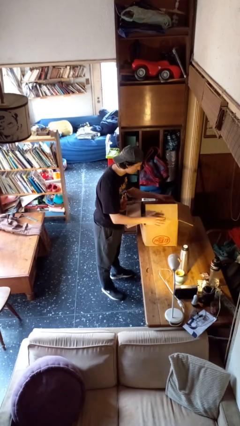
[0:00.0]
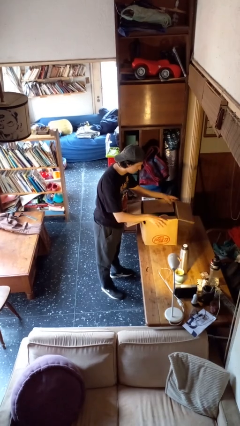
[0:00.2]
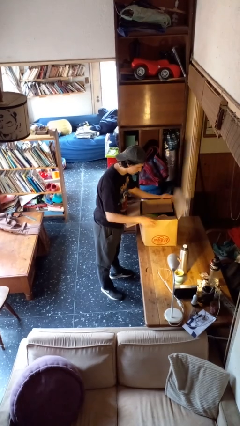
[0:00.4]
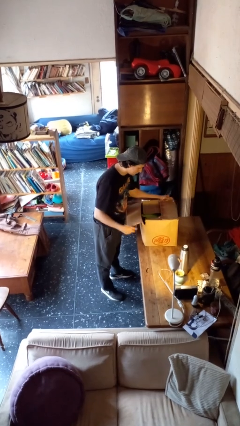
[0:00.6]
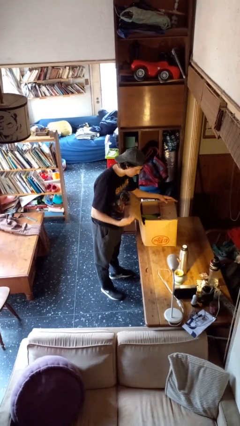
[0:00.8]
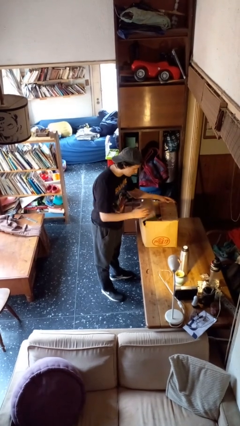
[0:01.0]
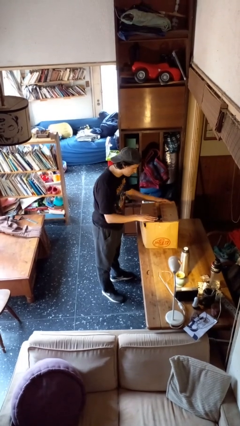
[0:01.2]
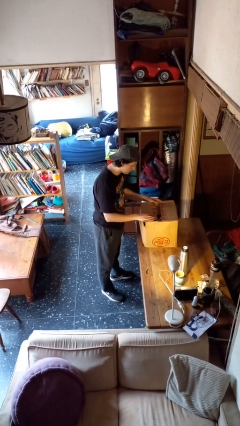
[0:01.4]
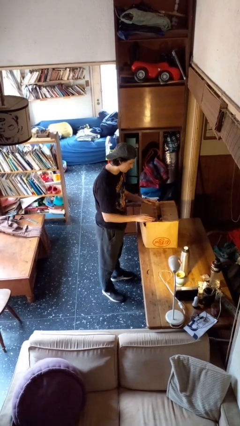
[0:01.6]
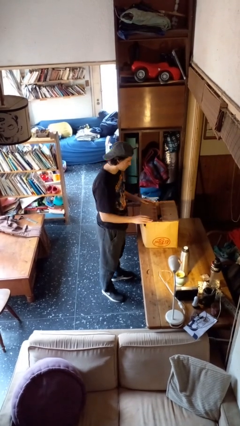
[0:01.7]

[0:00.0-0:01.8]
person closes box

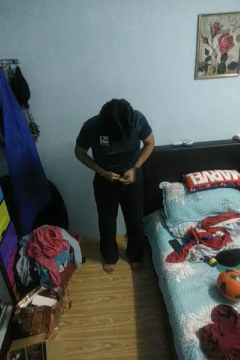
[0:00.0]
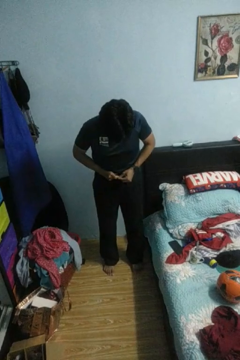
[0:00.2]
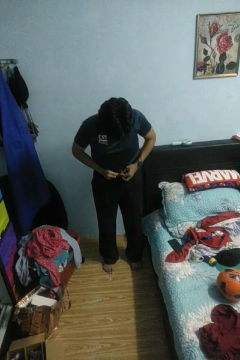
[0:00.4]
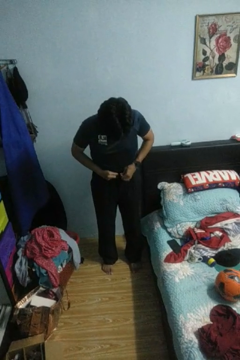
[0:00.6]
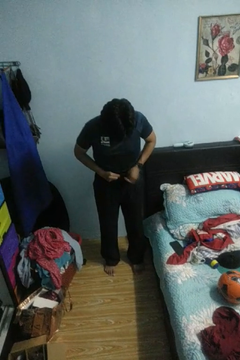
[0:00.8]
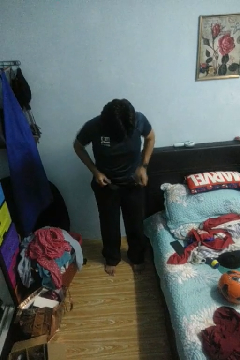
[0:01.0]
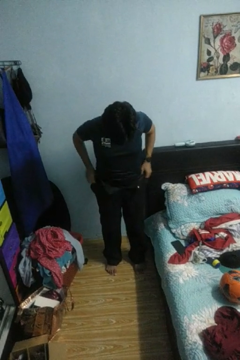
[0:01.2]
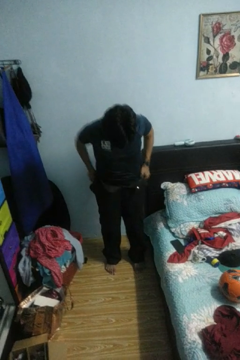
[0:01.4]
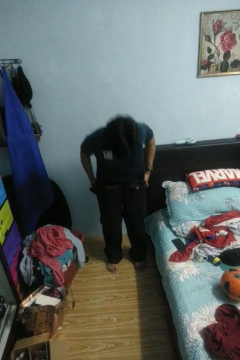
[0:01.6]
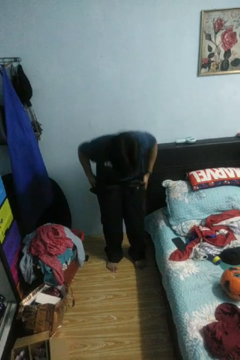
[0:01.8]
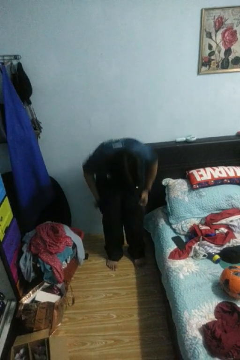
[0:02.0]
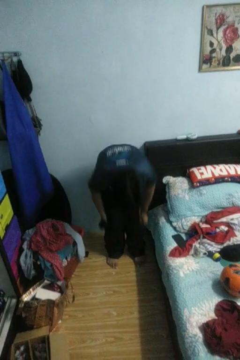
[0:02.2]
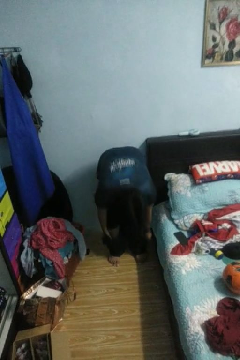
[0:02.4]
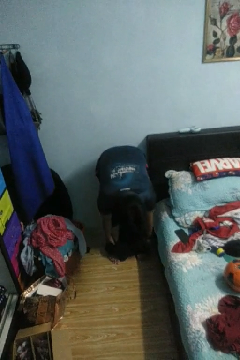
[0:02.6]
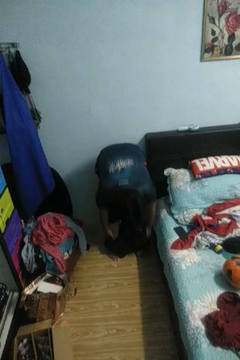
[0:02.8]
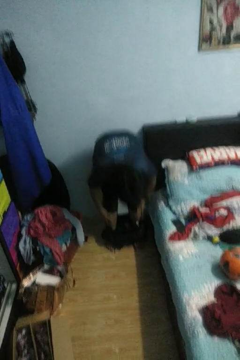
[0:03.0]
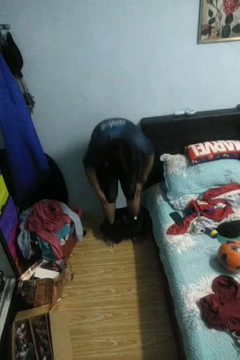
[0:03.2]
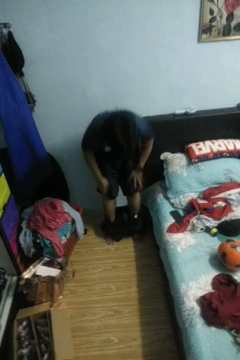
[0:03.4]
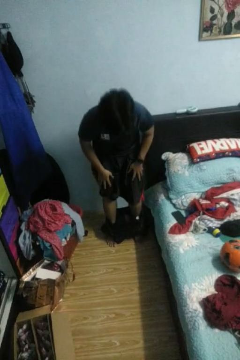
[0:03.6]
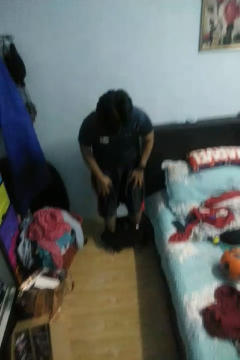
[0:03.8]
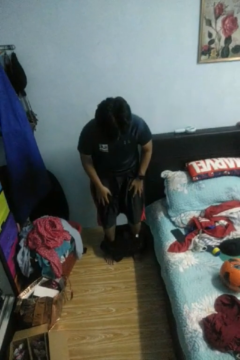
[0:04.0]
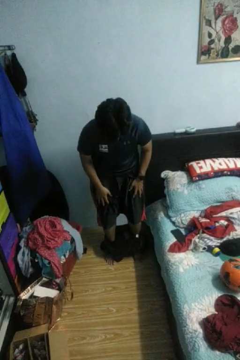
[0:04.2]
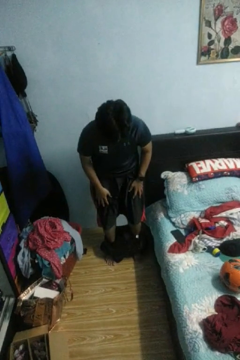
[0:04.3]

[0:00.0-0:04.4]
person takes off pants

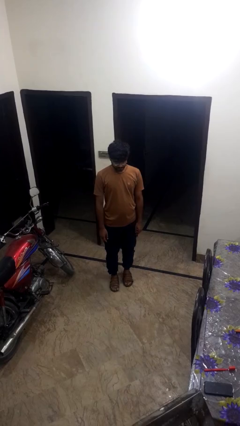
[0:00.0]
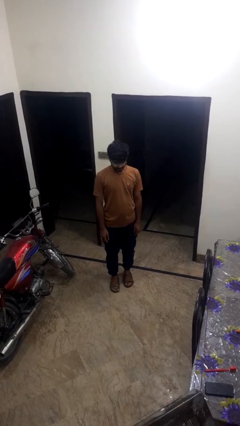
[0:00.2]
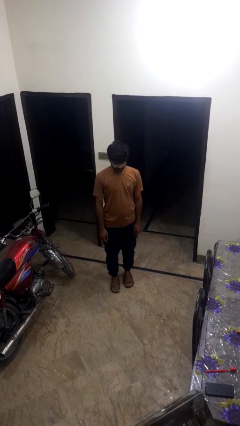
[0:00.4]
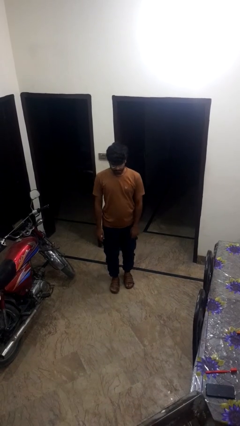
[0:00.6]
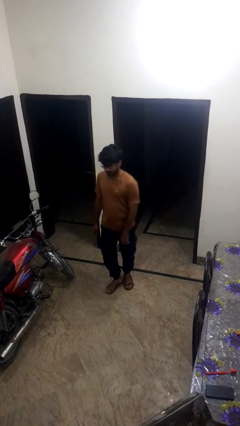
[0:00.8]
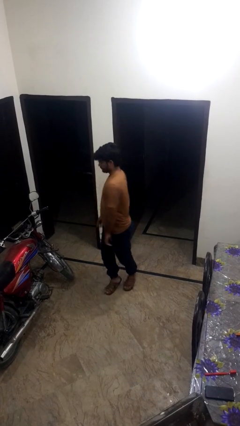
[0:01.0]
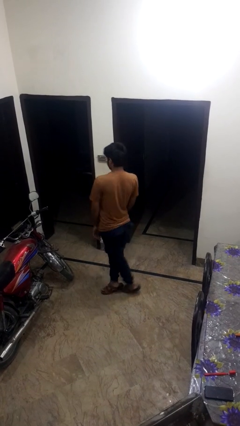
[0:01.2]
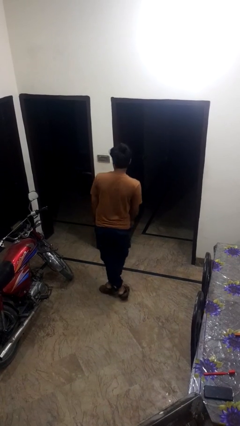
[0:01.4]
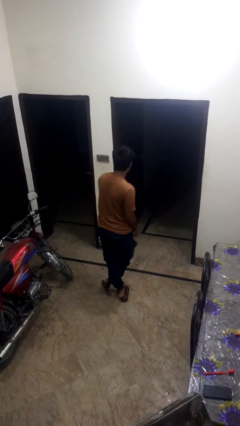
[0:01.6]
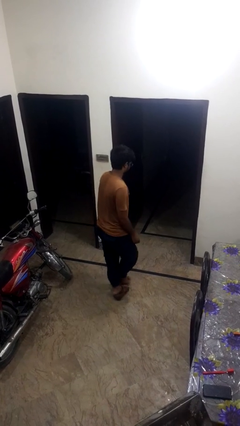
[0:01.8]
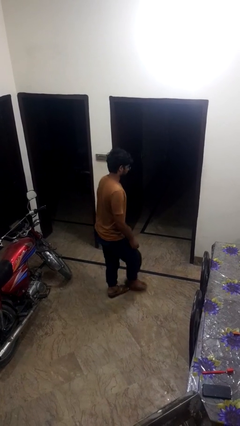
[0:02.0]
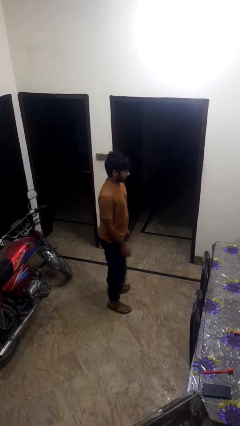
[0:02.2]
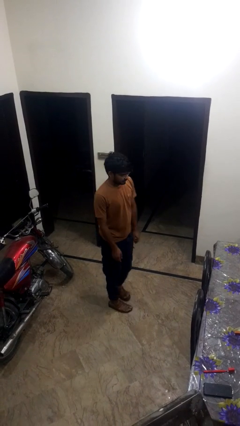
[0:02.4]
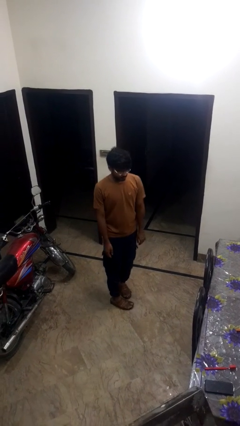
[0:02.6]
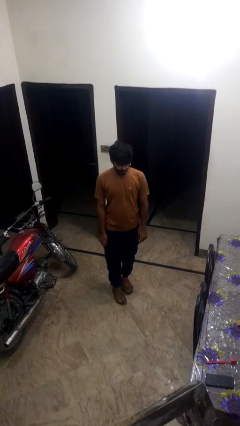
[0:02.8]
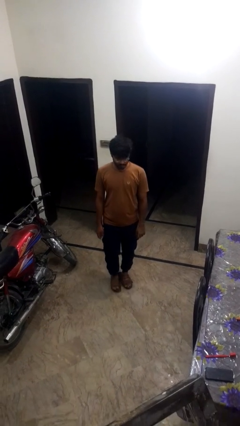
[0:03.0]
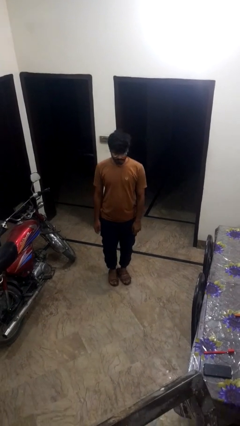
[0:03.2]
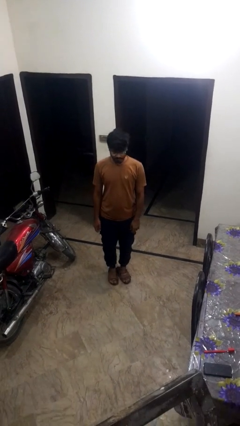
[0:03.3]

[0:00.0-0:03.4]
person twirls

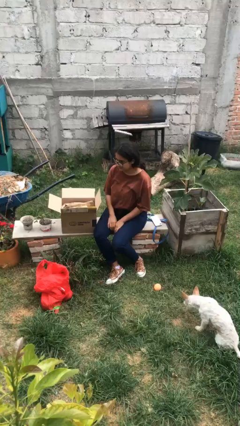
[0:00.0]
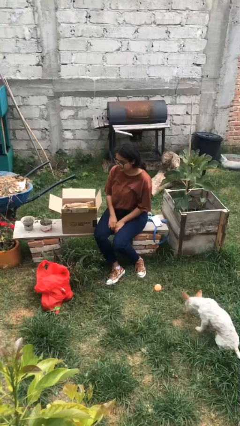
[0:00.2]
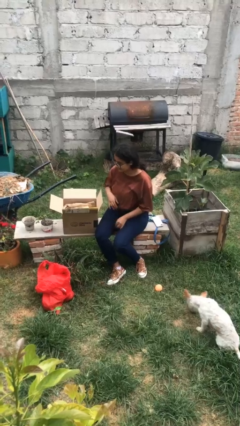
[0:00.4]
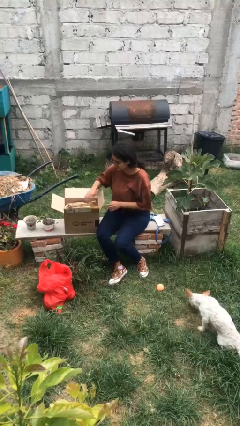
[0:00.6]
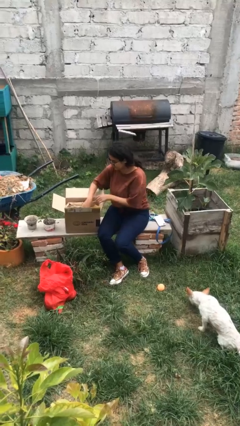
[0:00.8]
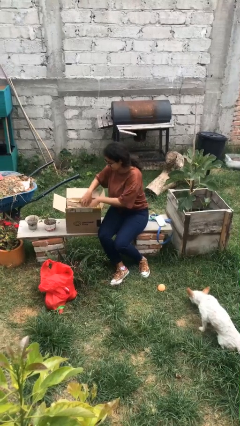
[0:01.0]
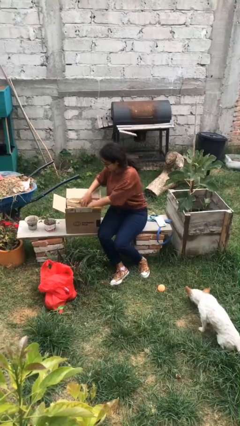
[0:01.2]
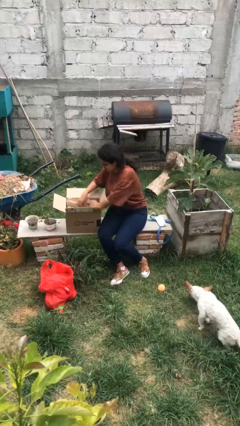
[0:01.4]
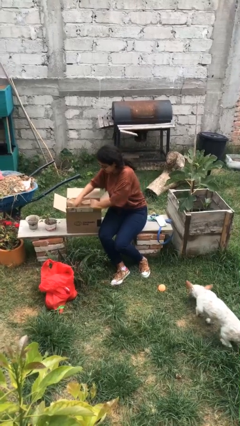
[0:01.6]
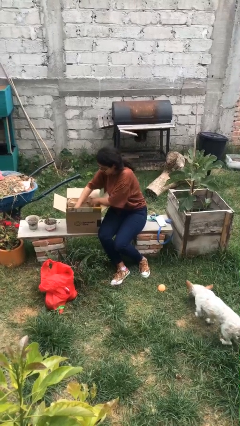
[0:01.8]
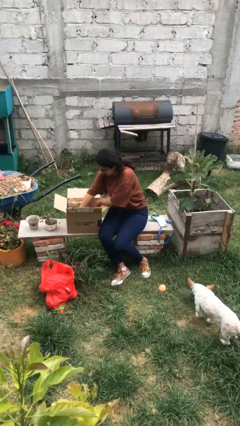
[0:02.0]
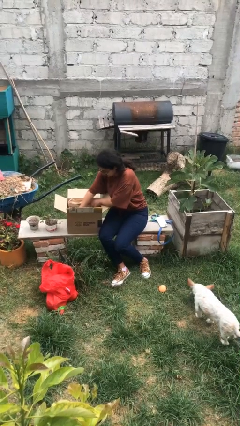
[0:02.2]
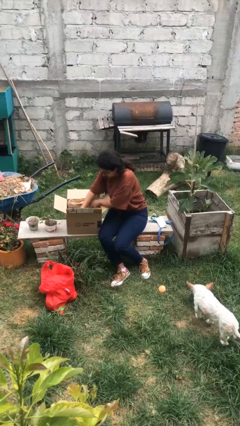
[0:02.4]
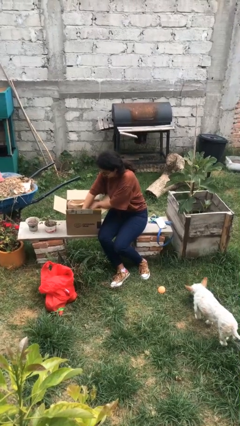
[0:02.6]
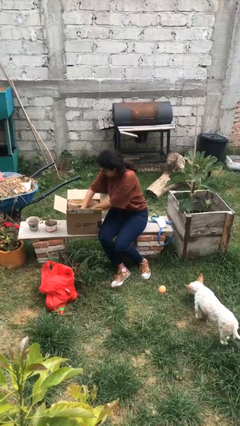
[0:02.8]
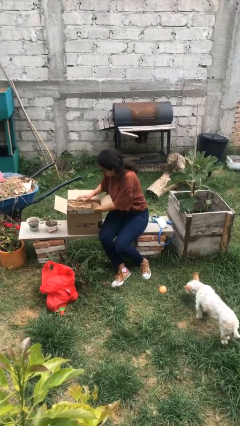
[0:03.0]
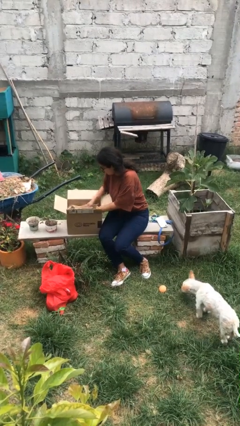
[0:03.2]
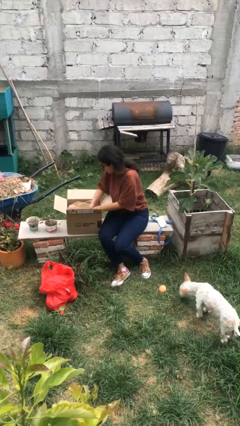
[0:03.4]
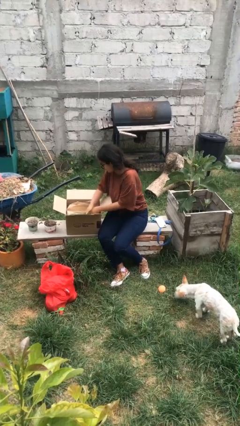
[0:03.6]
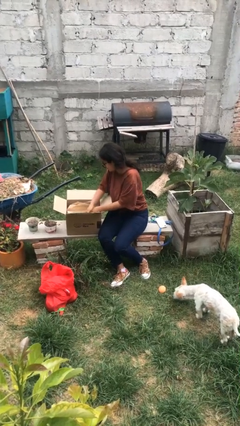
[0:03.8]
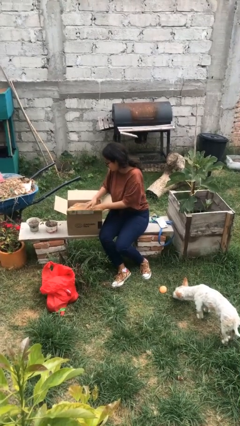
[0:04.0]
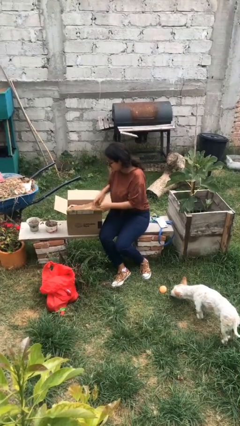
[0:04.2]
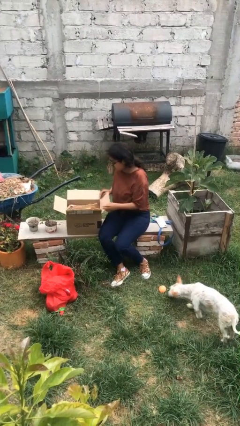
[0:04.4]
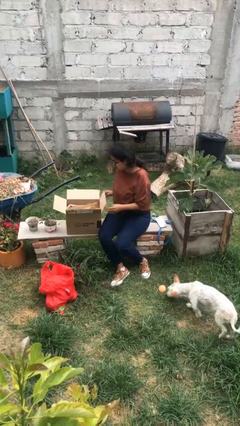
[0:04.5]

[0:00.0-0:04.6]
person searches in box

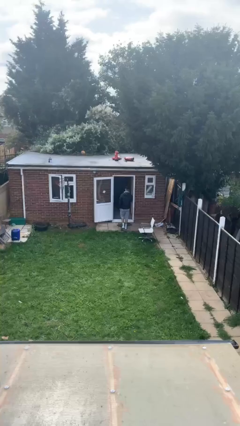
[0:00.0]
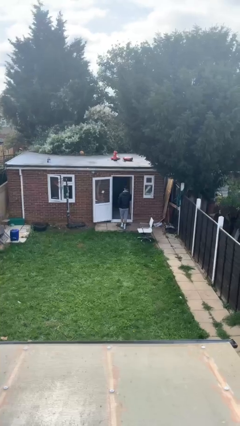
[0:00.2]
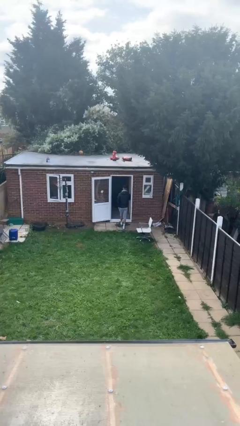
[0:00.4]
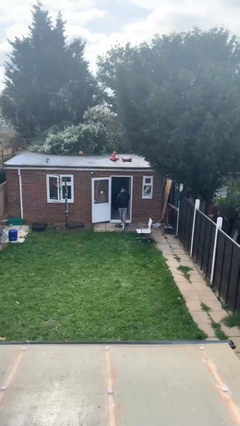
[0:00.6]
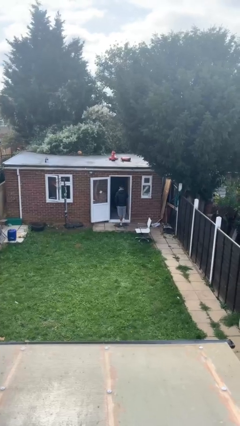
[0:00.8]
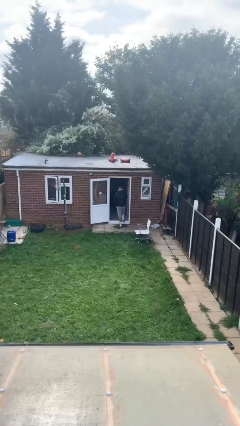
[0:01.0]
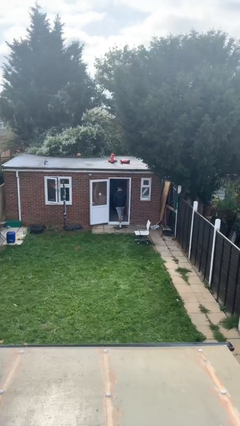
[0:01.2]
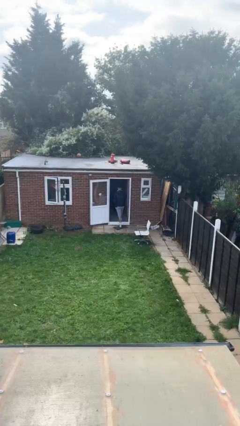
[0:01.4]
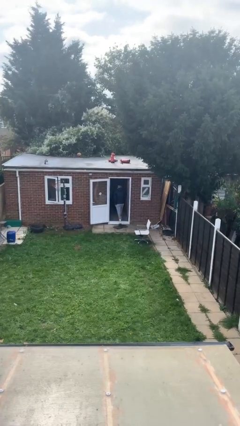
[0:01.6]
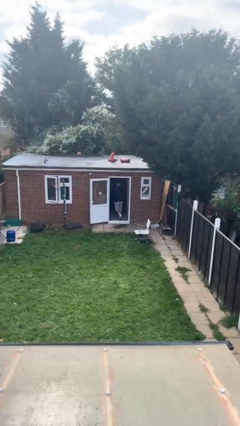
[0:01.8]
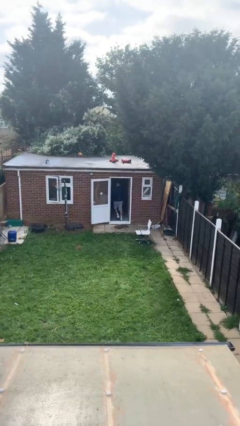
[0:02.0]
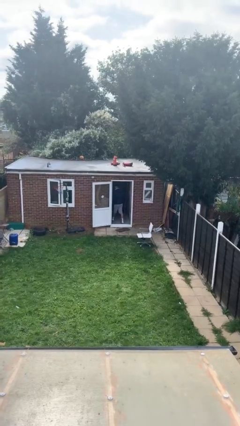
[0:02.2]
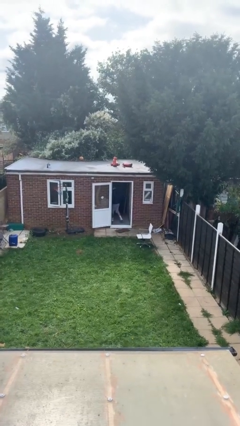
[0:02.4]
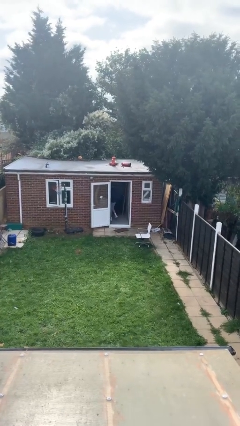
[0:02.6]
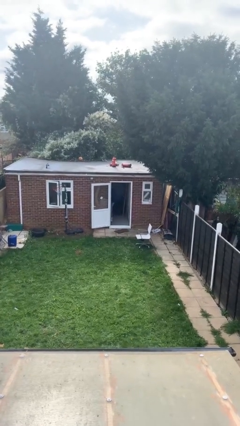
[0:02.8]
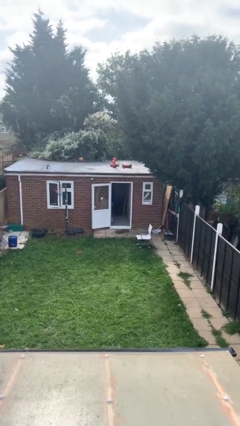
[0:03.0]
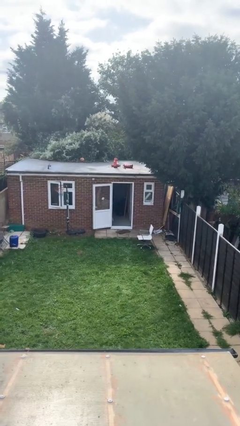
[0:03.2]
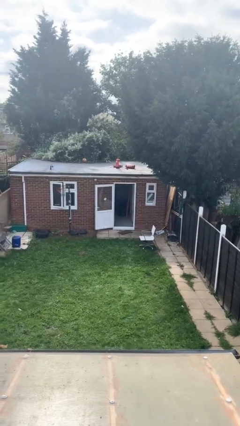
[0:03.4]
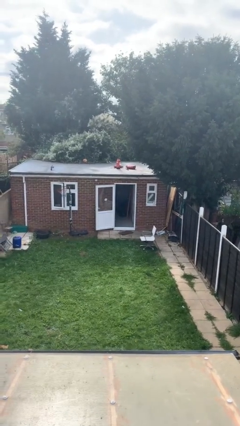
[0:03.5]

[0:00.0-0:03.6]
person exits scene through structure

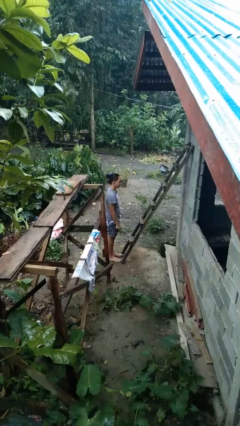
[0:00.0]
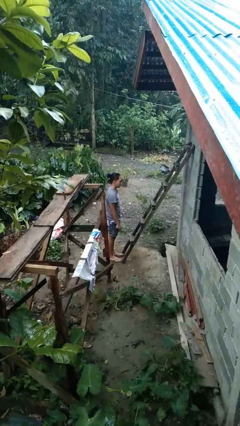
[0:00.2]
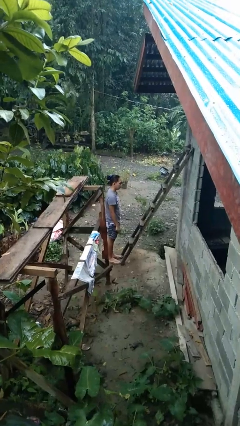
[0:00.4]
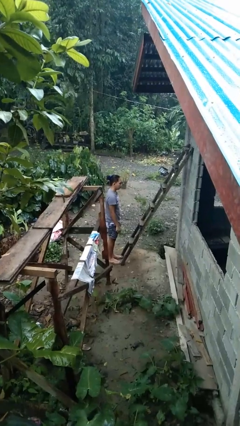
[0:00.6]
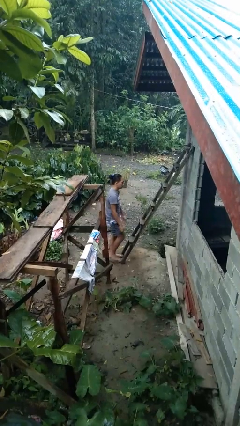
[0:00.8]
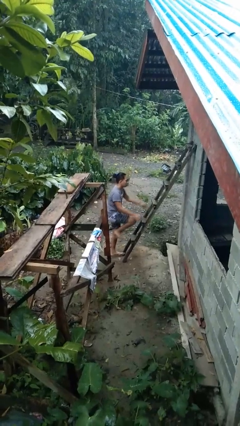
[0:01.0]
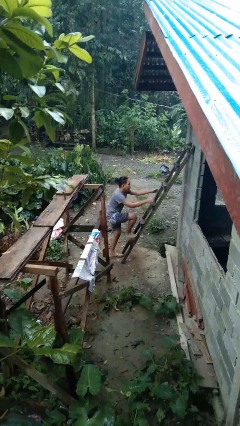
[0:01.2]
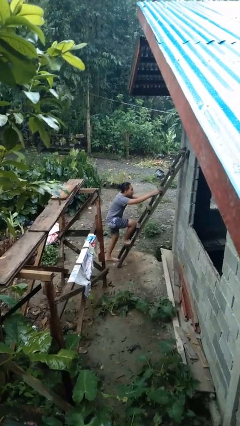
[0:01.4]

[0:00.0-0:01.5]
person climbs up ladder
